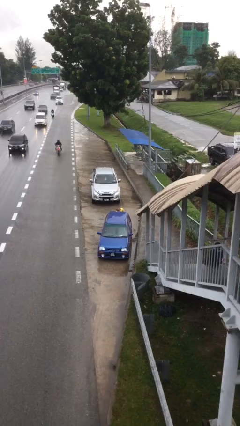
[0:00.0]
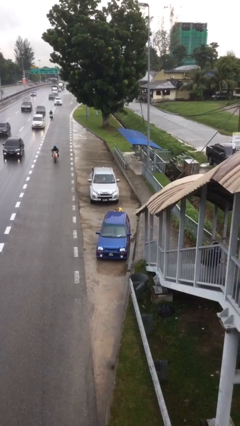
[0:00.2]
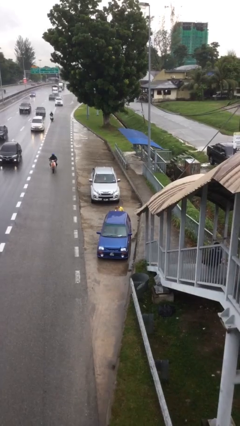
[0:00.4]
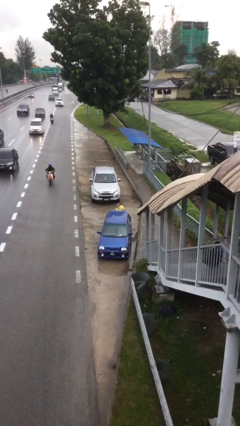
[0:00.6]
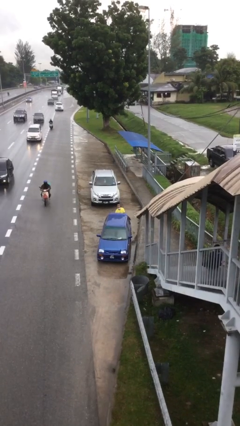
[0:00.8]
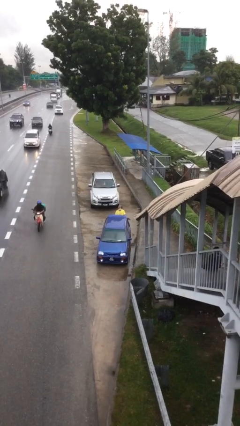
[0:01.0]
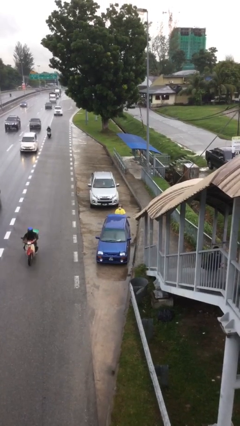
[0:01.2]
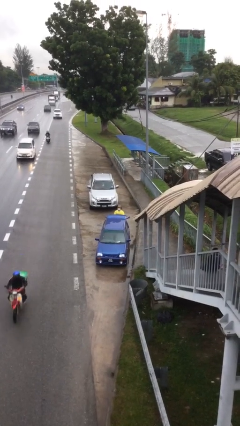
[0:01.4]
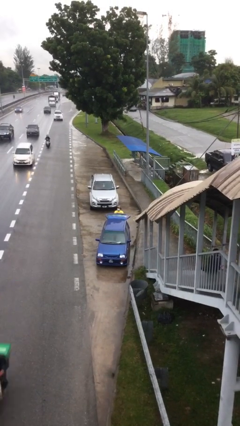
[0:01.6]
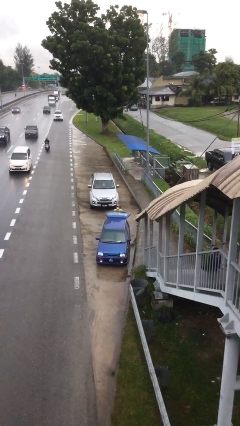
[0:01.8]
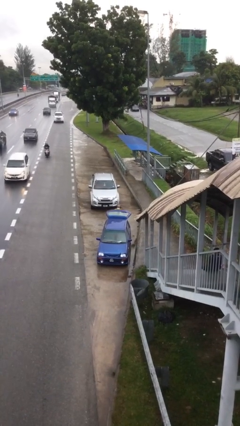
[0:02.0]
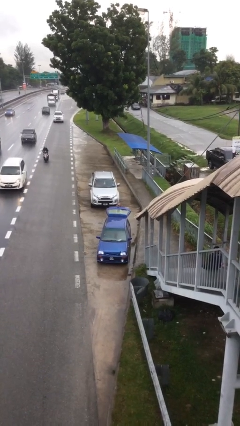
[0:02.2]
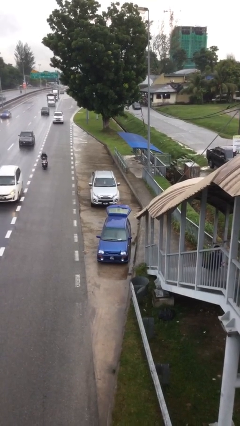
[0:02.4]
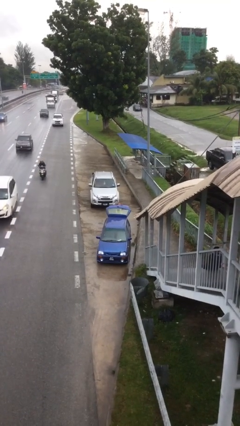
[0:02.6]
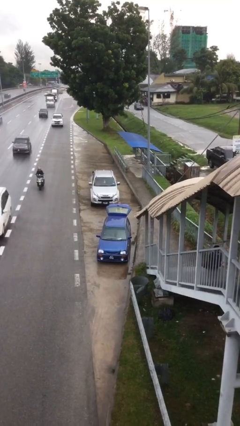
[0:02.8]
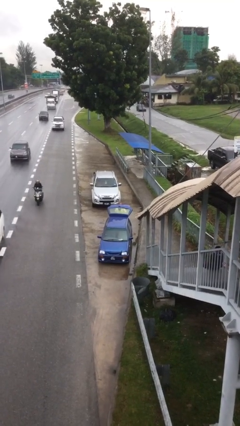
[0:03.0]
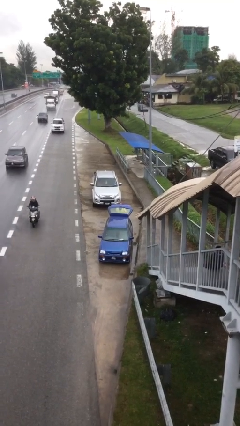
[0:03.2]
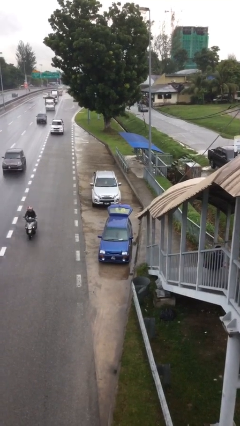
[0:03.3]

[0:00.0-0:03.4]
person opens car trunk

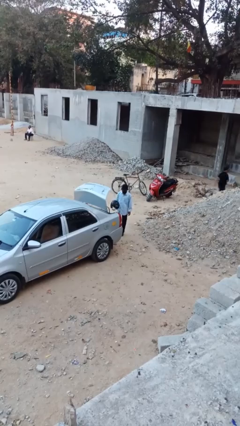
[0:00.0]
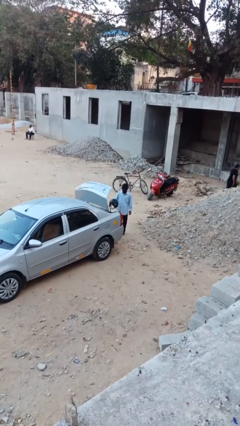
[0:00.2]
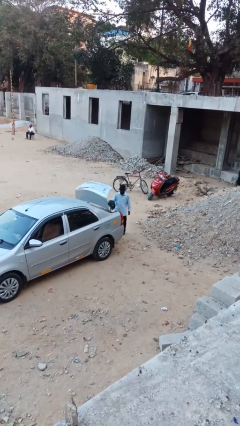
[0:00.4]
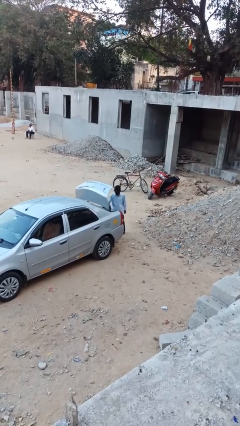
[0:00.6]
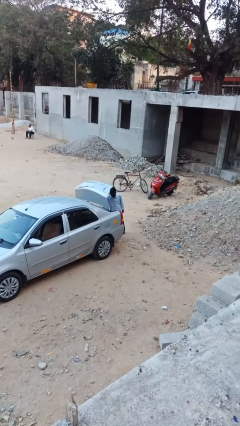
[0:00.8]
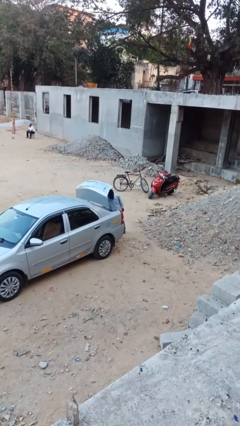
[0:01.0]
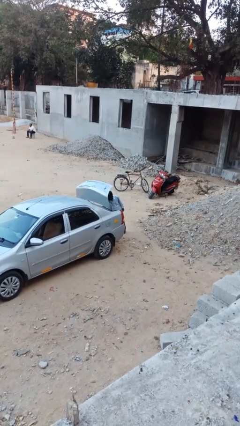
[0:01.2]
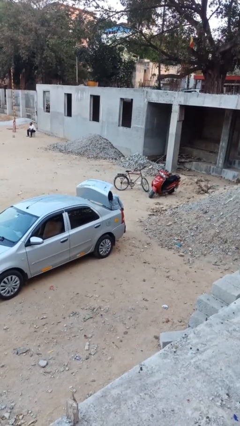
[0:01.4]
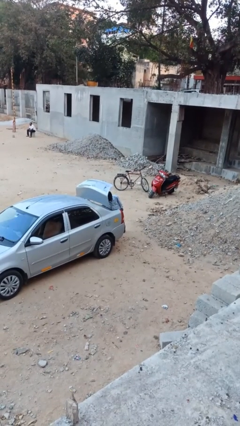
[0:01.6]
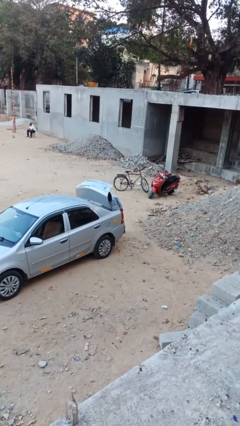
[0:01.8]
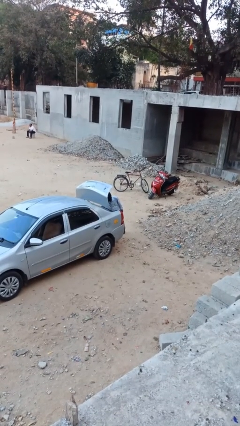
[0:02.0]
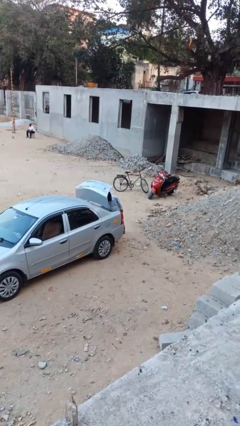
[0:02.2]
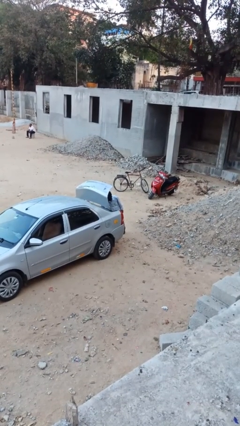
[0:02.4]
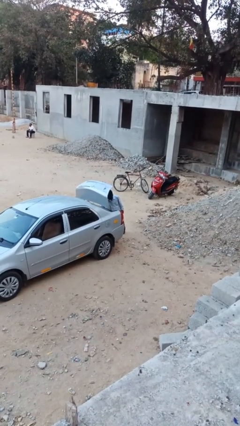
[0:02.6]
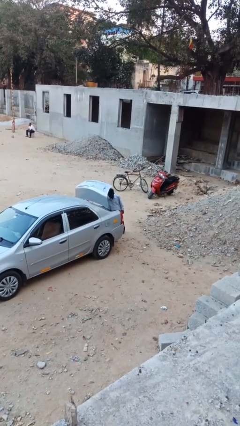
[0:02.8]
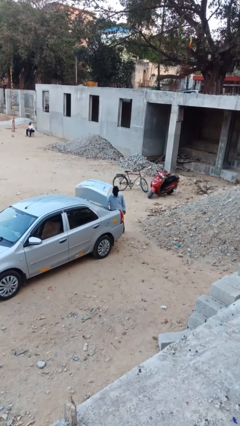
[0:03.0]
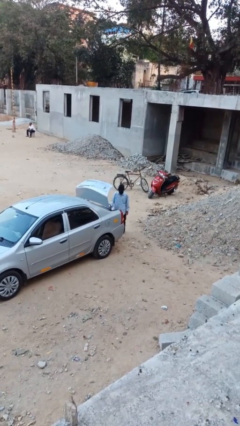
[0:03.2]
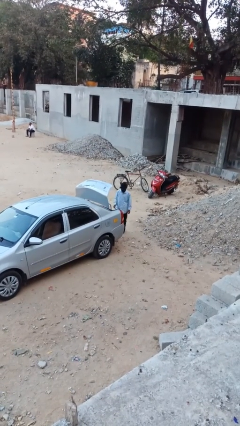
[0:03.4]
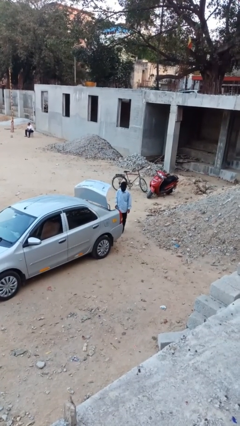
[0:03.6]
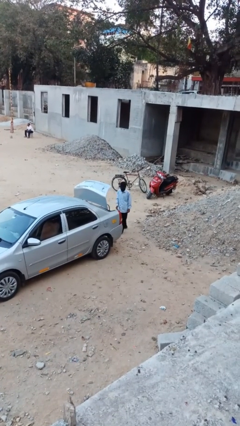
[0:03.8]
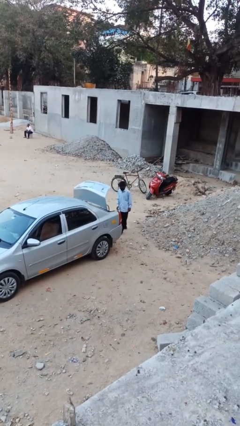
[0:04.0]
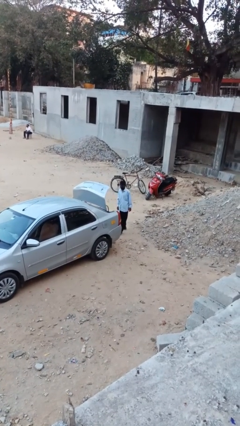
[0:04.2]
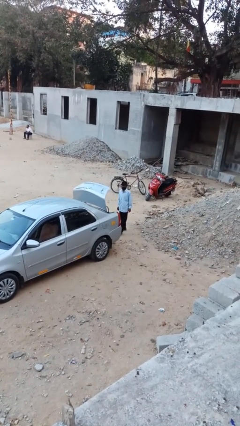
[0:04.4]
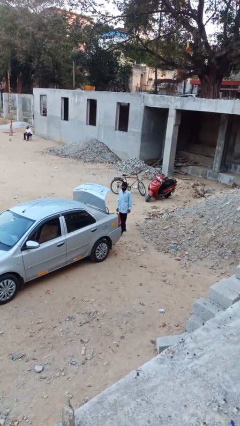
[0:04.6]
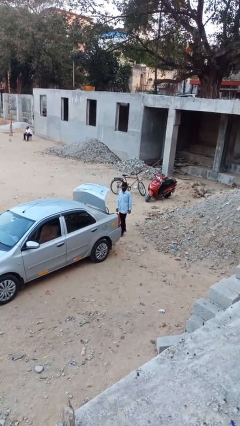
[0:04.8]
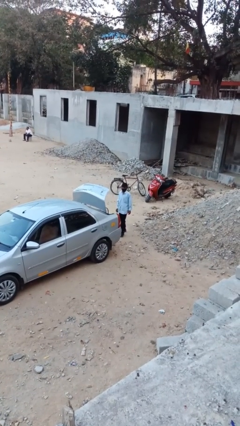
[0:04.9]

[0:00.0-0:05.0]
person loads car

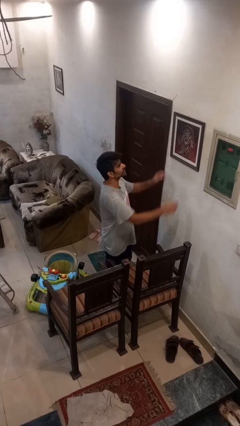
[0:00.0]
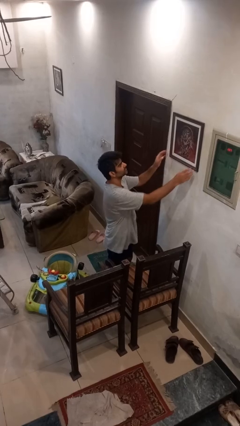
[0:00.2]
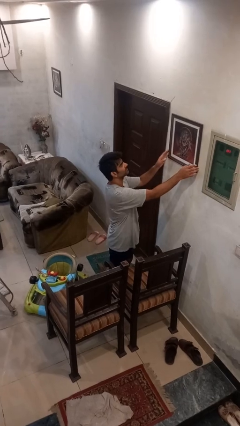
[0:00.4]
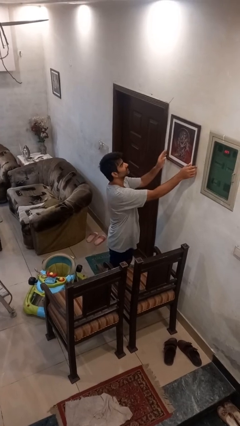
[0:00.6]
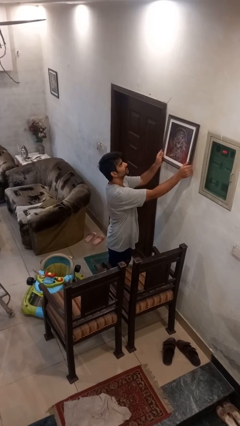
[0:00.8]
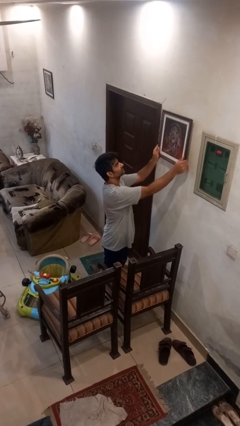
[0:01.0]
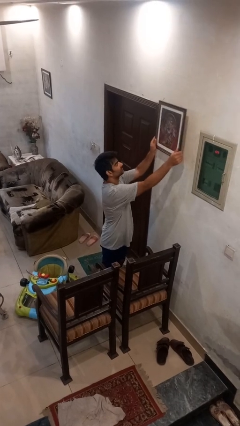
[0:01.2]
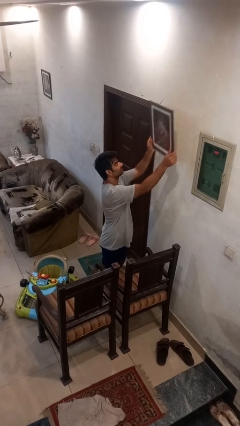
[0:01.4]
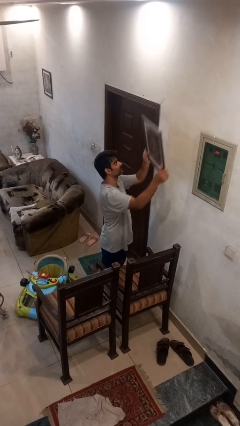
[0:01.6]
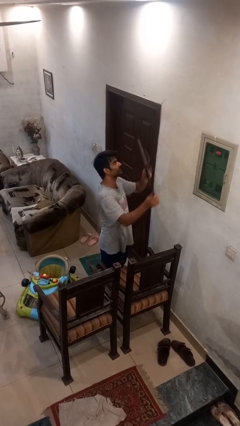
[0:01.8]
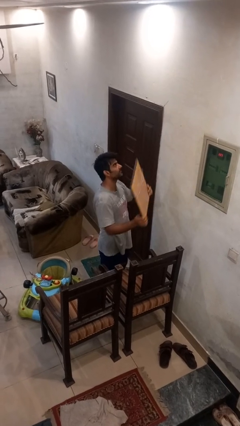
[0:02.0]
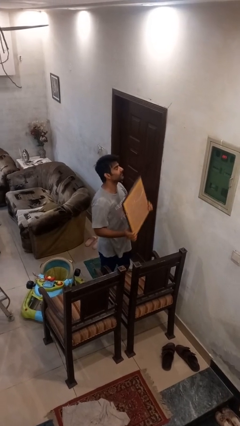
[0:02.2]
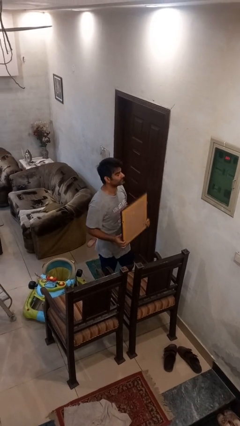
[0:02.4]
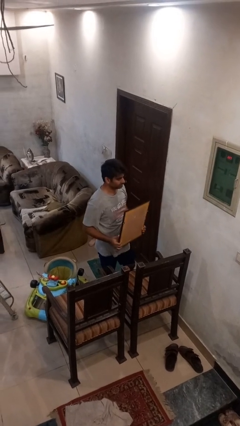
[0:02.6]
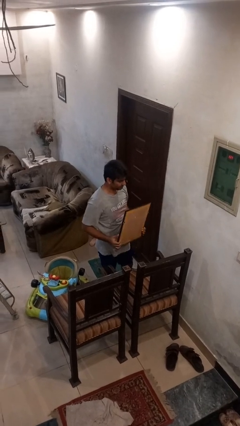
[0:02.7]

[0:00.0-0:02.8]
person takes down picture frame

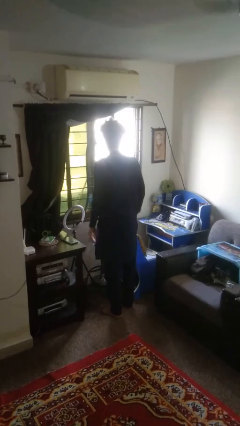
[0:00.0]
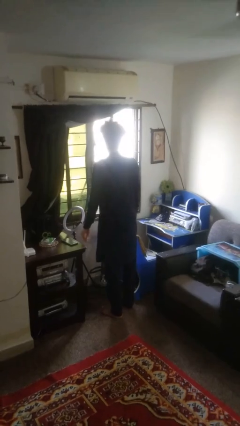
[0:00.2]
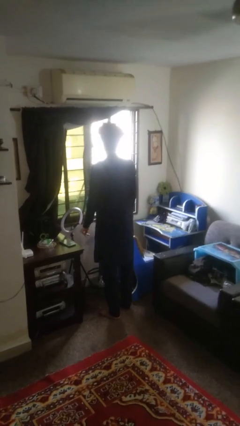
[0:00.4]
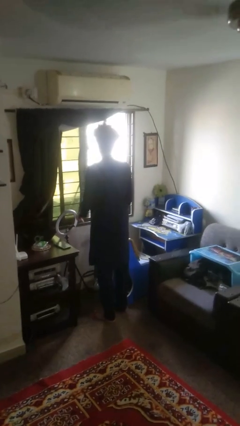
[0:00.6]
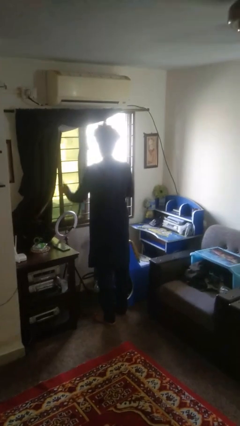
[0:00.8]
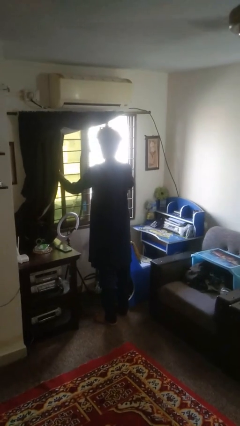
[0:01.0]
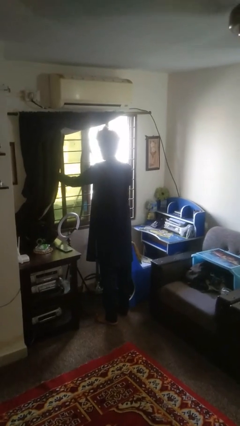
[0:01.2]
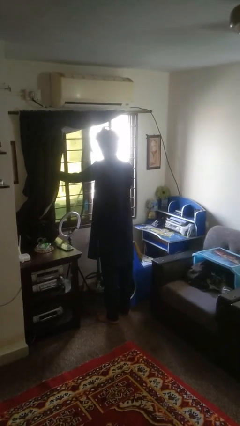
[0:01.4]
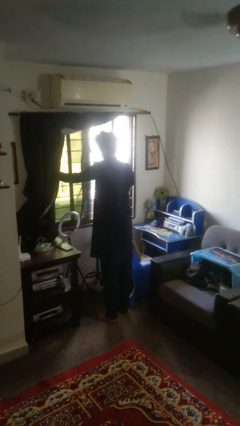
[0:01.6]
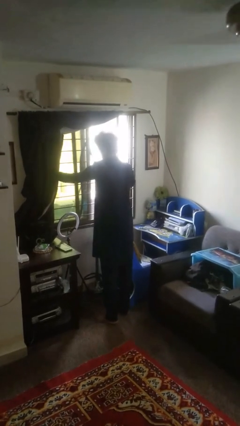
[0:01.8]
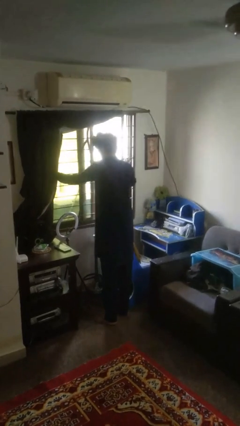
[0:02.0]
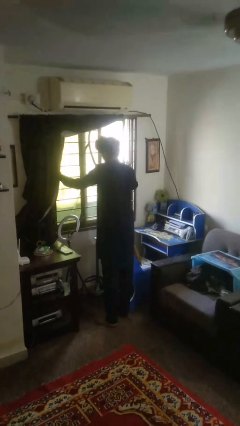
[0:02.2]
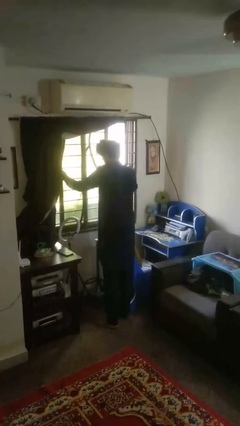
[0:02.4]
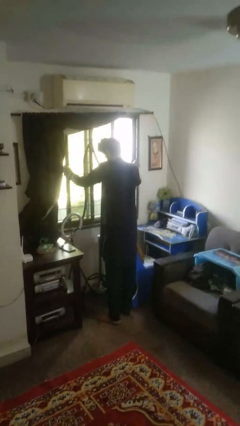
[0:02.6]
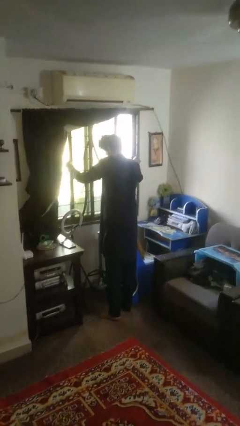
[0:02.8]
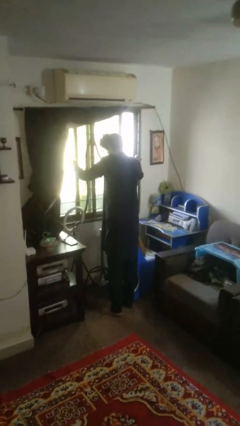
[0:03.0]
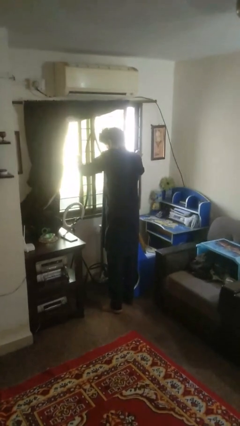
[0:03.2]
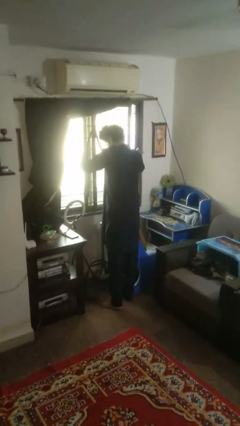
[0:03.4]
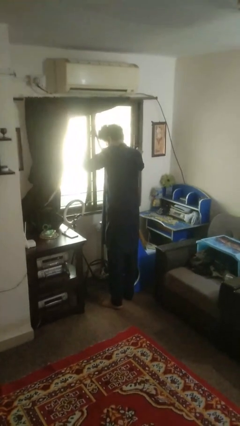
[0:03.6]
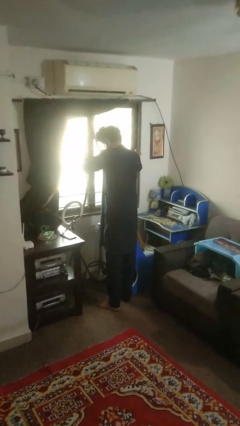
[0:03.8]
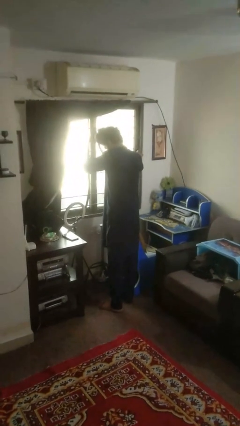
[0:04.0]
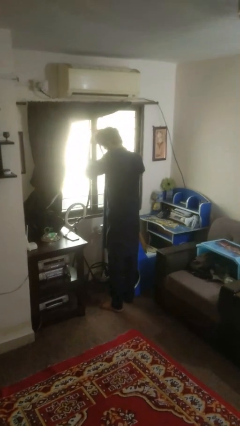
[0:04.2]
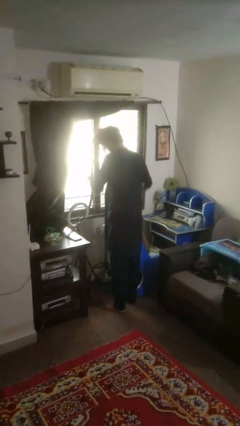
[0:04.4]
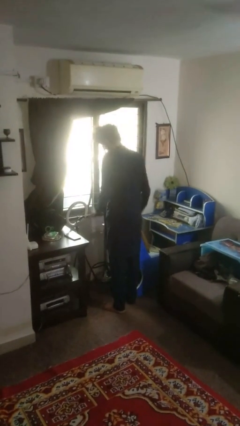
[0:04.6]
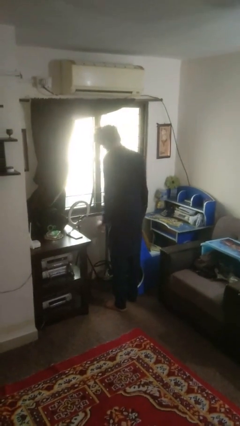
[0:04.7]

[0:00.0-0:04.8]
person closes home window

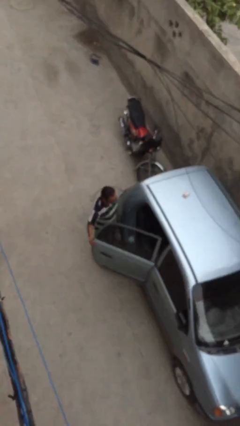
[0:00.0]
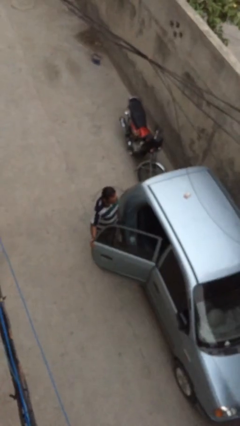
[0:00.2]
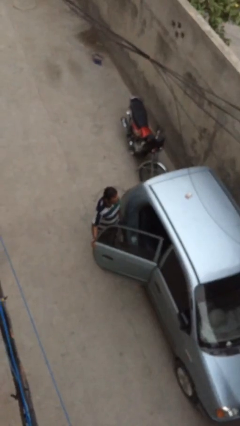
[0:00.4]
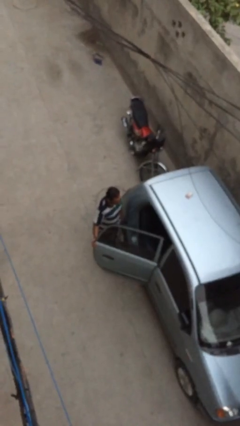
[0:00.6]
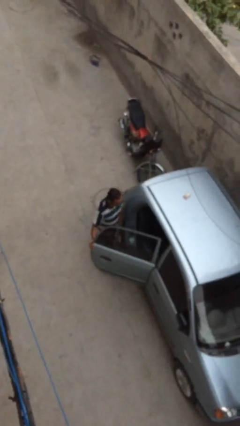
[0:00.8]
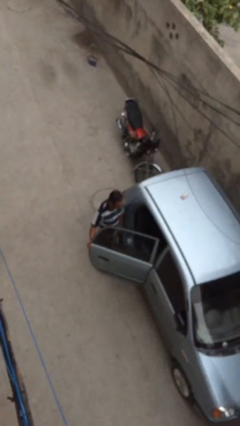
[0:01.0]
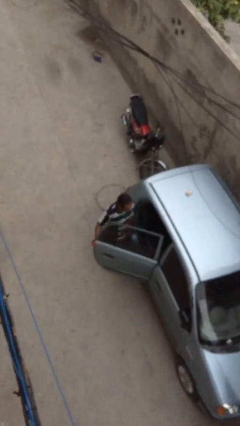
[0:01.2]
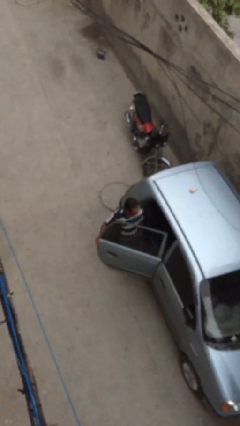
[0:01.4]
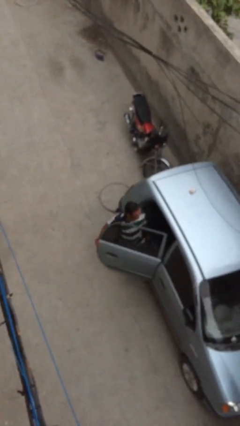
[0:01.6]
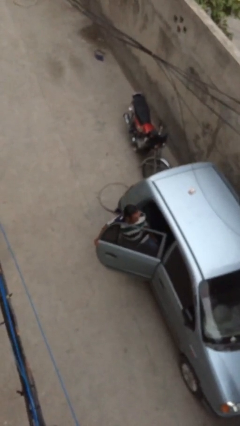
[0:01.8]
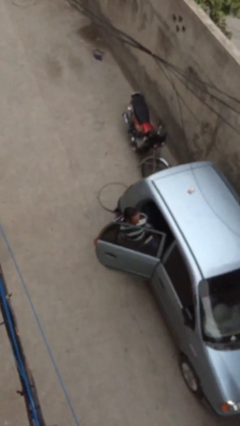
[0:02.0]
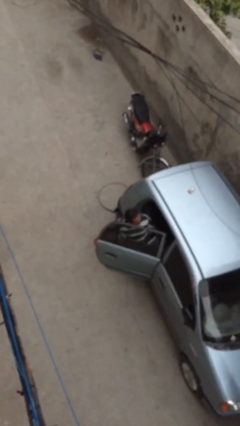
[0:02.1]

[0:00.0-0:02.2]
person enters car
